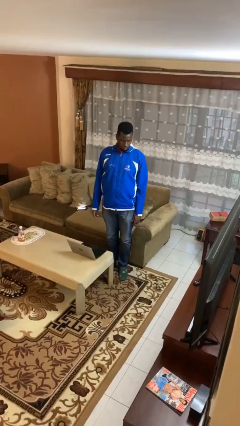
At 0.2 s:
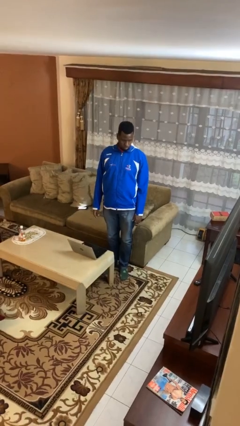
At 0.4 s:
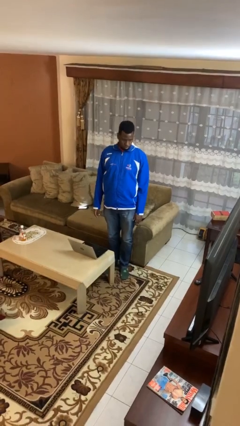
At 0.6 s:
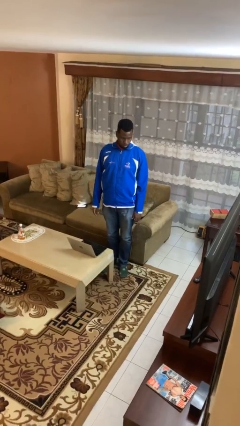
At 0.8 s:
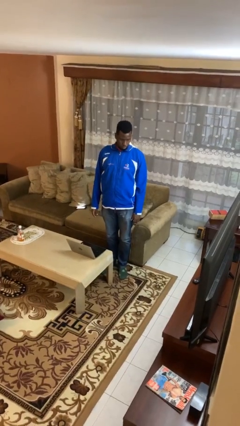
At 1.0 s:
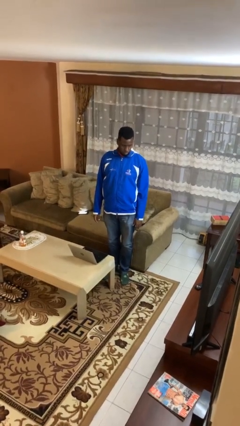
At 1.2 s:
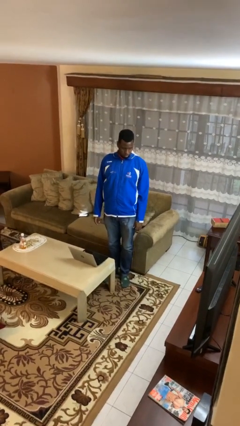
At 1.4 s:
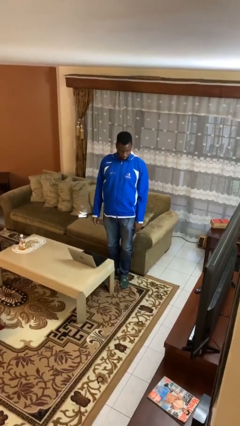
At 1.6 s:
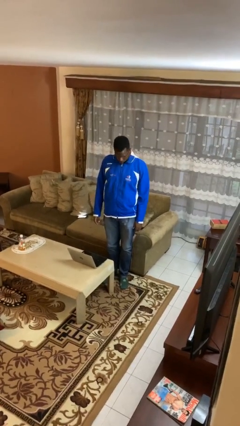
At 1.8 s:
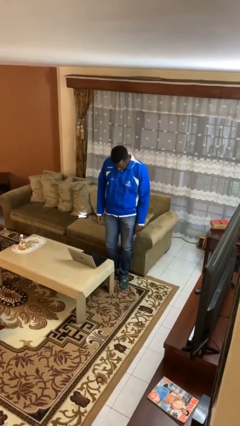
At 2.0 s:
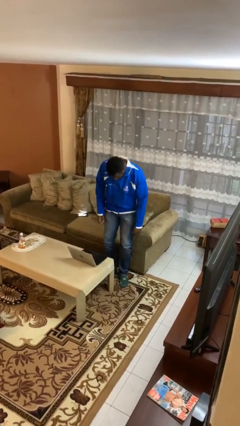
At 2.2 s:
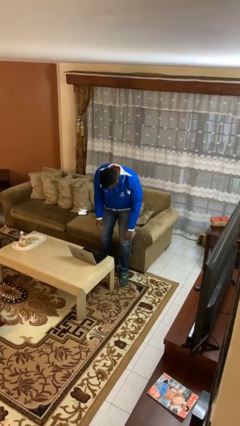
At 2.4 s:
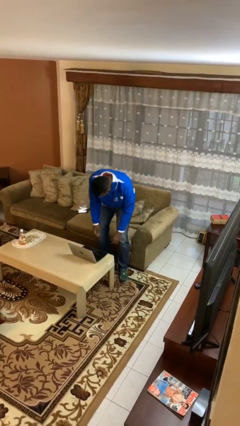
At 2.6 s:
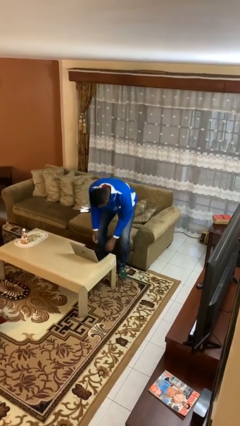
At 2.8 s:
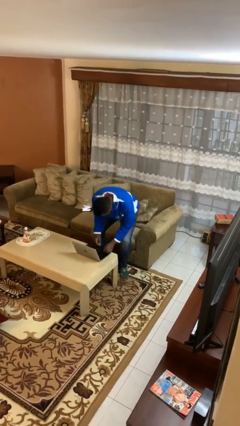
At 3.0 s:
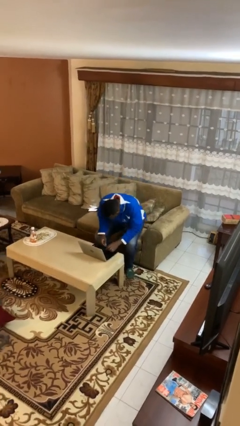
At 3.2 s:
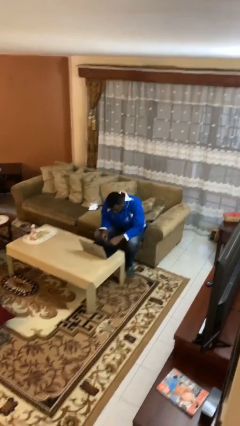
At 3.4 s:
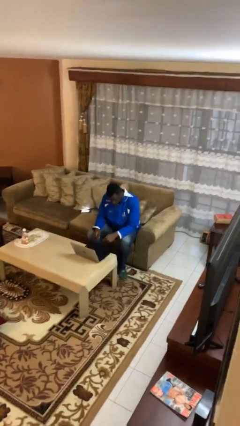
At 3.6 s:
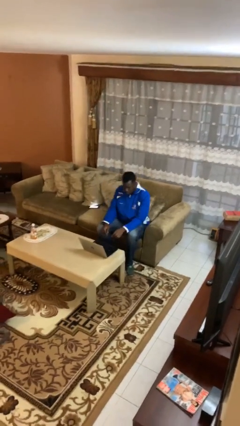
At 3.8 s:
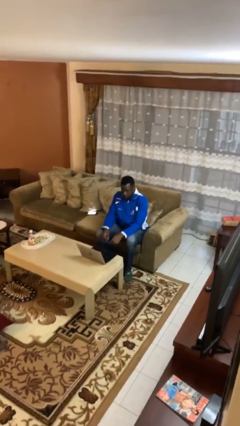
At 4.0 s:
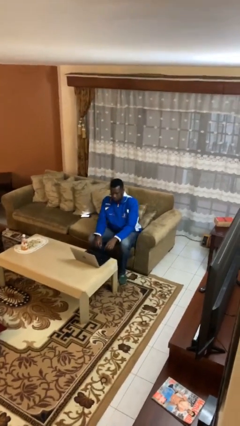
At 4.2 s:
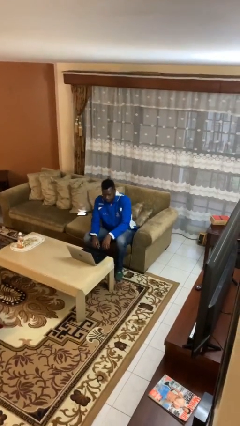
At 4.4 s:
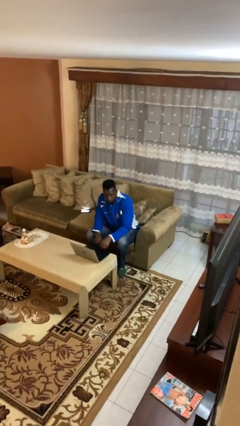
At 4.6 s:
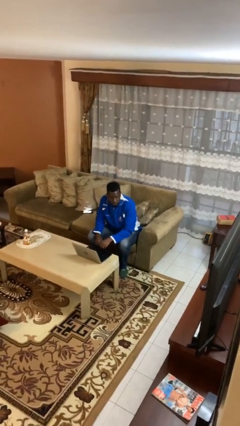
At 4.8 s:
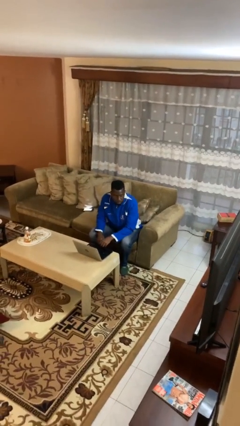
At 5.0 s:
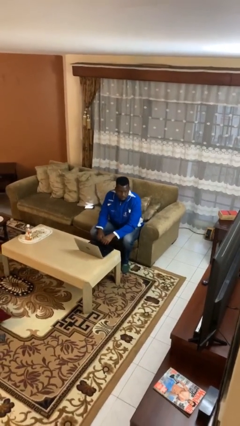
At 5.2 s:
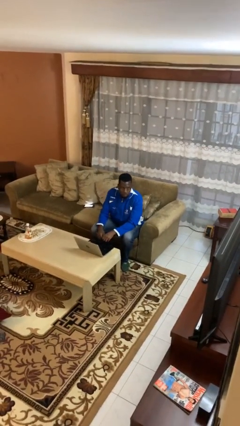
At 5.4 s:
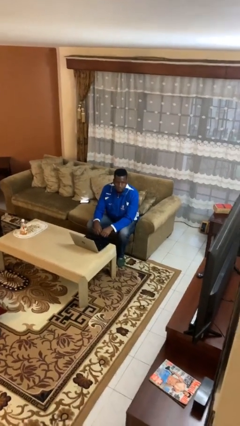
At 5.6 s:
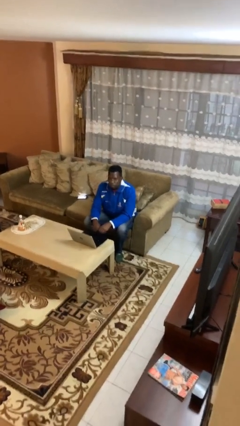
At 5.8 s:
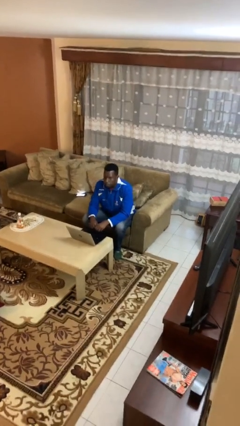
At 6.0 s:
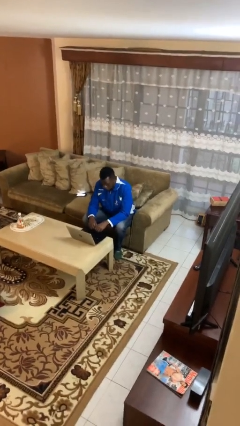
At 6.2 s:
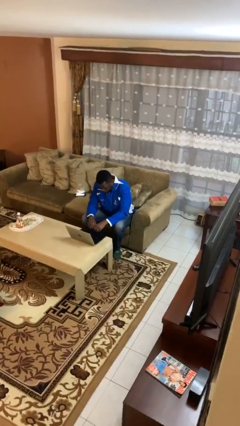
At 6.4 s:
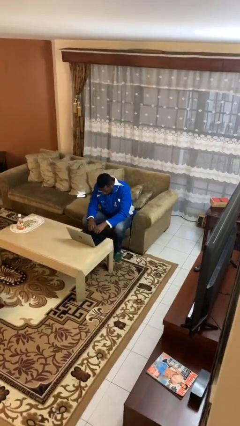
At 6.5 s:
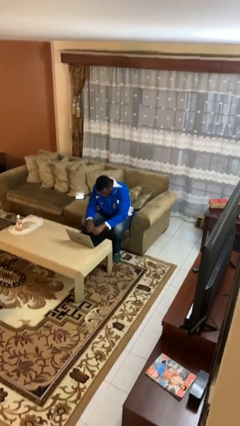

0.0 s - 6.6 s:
person sits down

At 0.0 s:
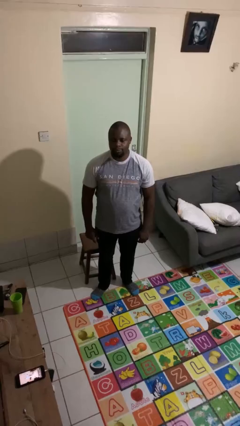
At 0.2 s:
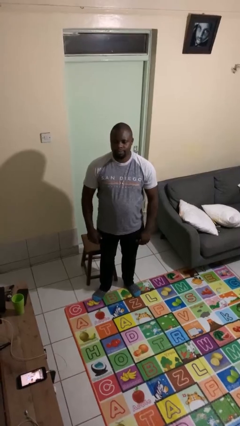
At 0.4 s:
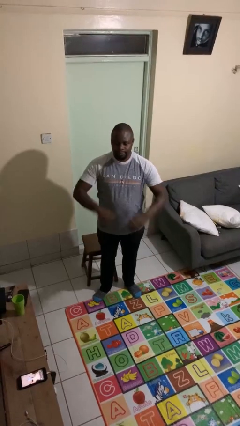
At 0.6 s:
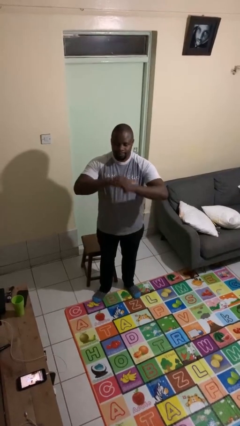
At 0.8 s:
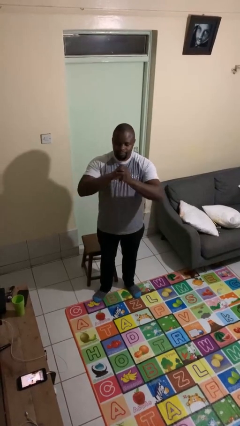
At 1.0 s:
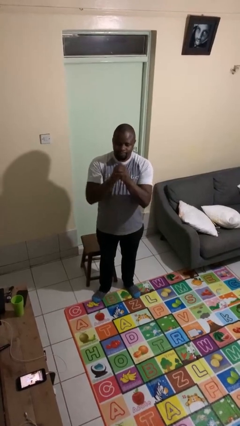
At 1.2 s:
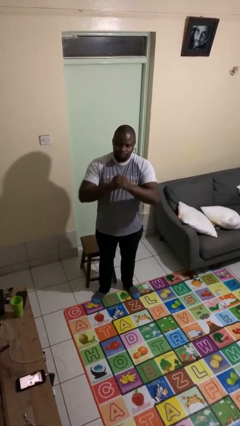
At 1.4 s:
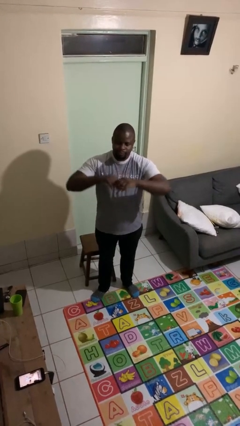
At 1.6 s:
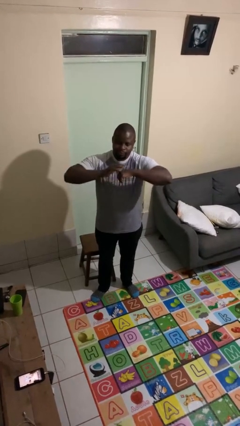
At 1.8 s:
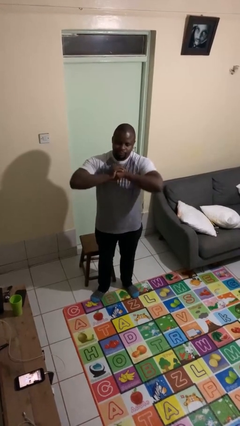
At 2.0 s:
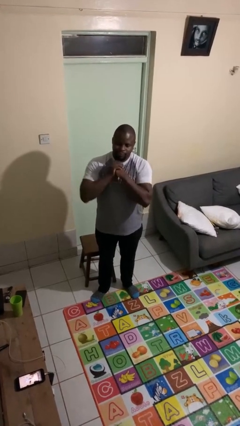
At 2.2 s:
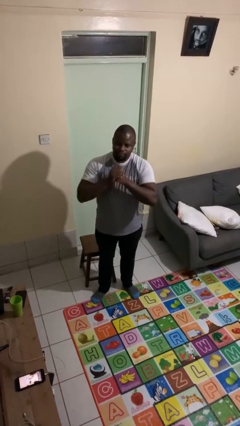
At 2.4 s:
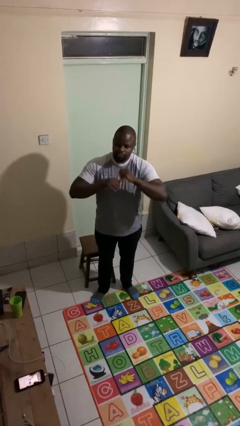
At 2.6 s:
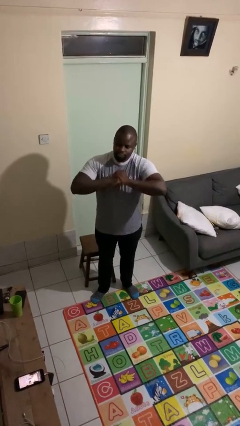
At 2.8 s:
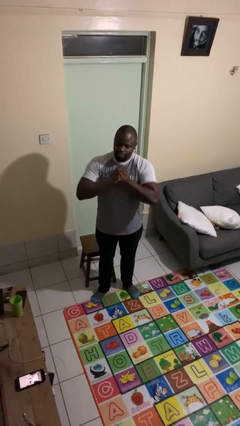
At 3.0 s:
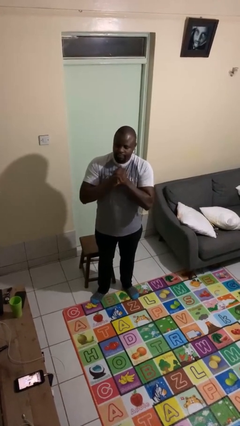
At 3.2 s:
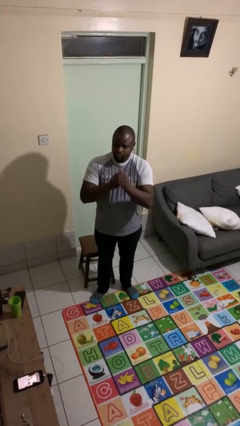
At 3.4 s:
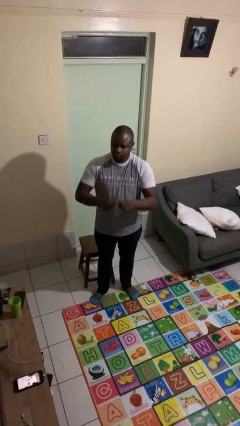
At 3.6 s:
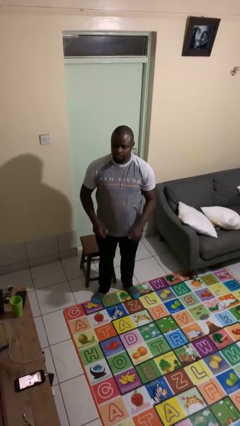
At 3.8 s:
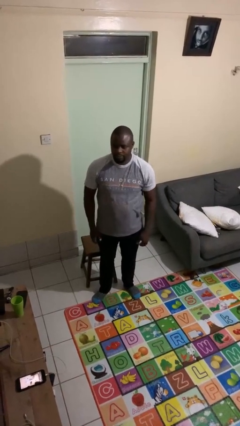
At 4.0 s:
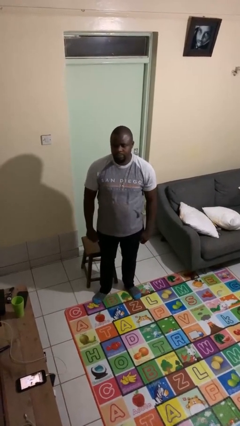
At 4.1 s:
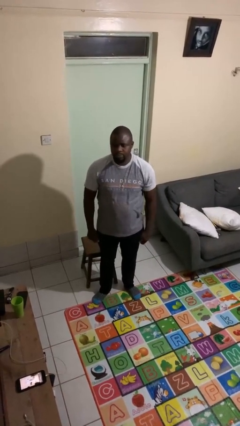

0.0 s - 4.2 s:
person cracks knuckles

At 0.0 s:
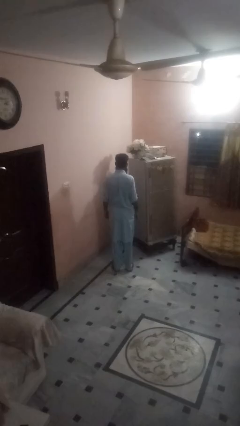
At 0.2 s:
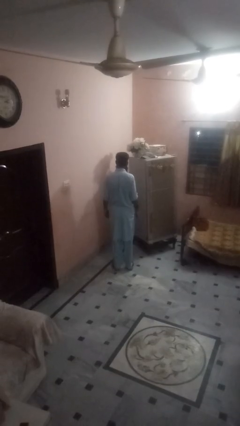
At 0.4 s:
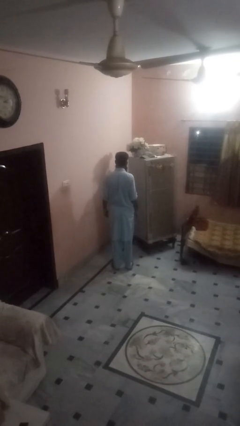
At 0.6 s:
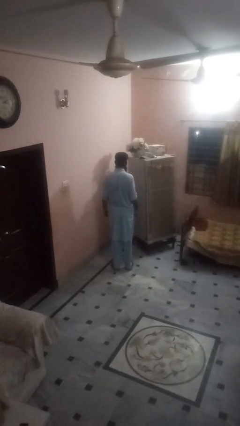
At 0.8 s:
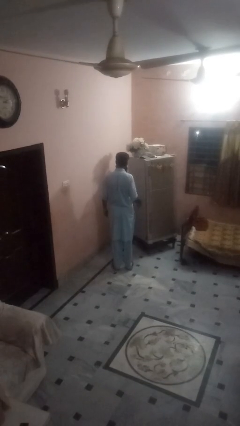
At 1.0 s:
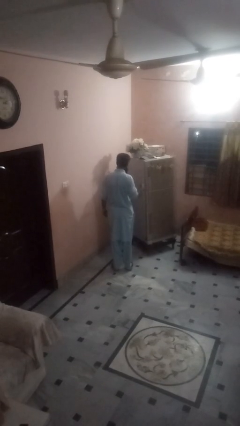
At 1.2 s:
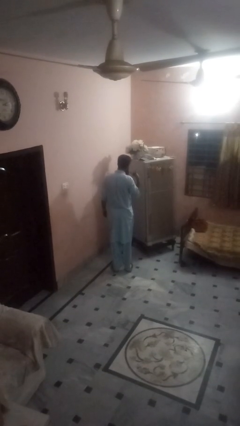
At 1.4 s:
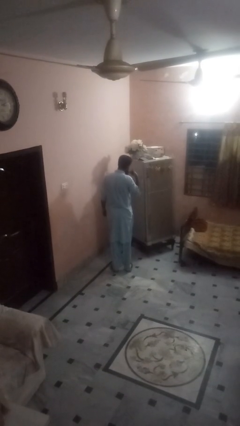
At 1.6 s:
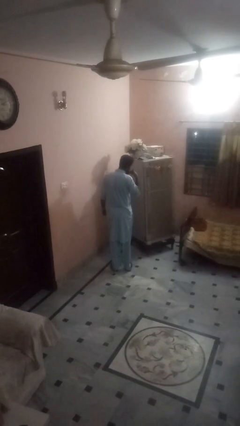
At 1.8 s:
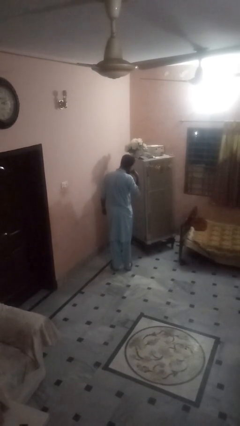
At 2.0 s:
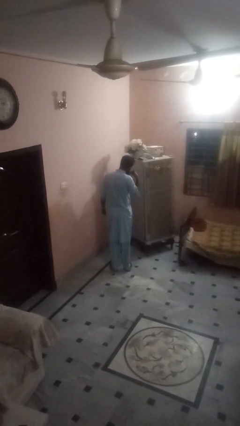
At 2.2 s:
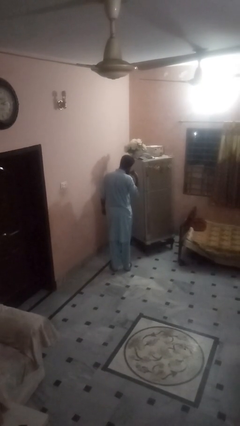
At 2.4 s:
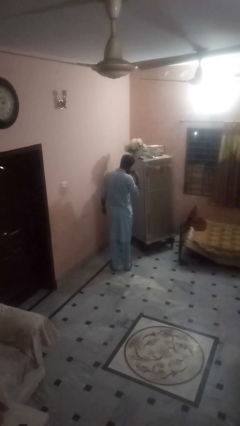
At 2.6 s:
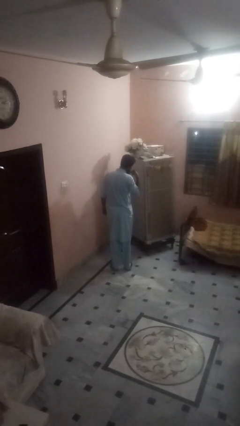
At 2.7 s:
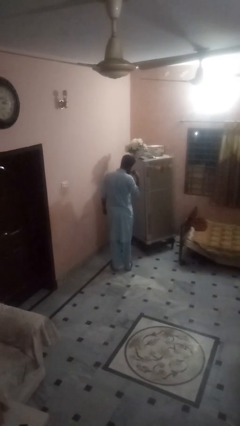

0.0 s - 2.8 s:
person gestures call me

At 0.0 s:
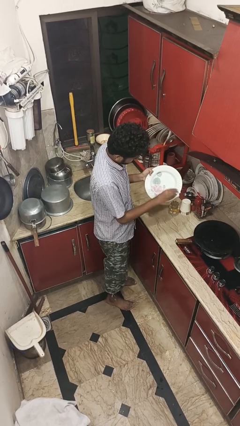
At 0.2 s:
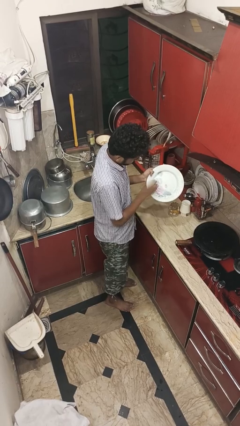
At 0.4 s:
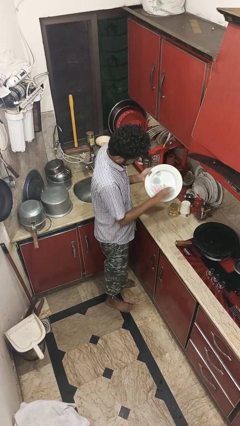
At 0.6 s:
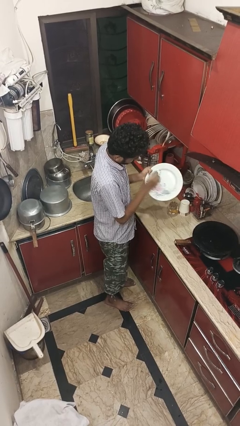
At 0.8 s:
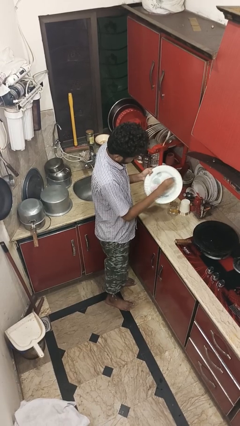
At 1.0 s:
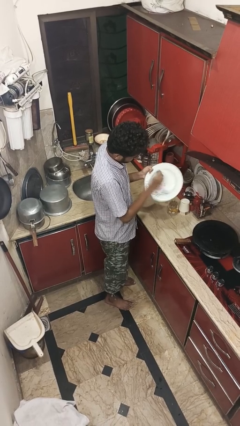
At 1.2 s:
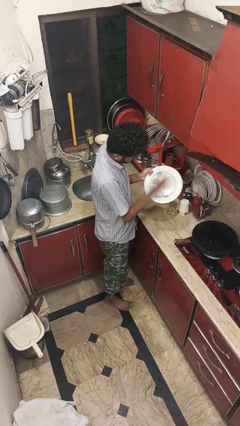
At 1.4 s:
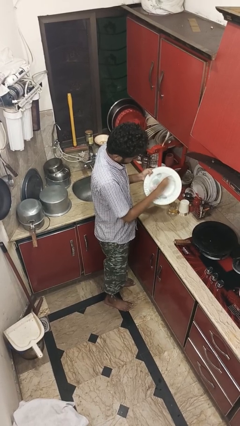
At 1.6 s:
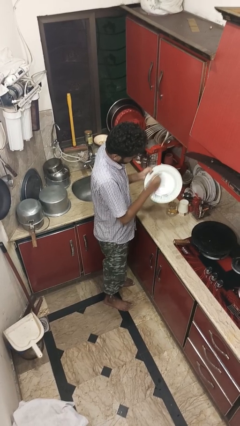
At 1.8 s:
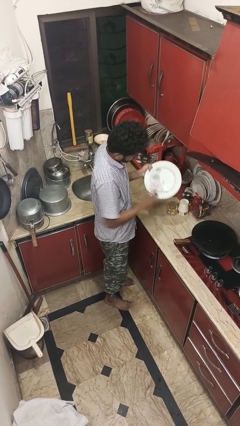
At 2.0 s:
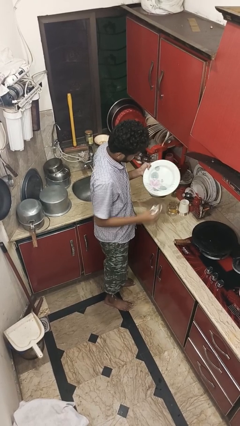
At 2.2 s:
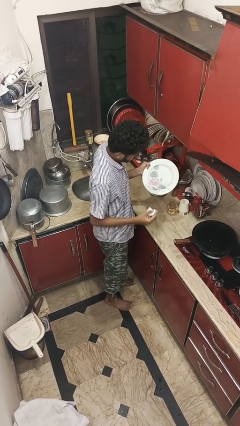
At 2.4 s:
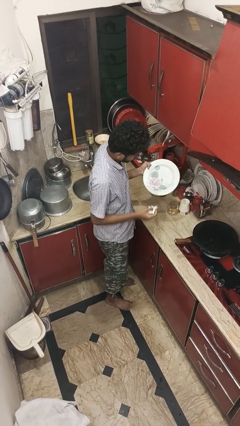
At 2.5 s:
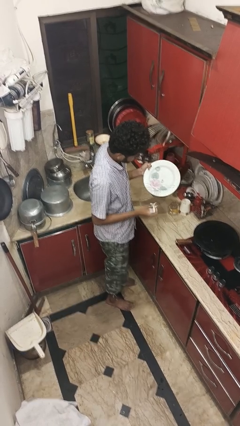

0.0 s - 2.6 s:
person dries dish

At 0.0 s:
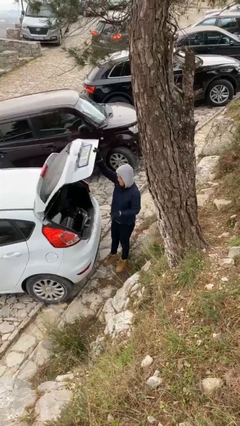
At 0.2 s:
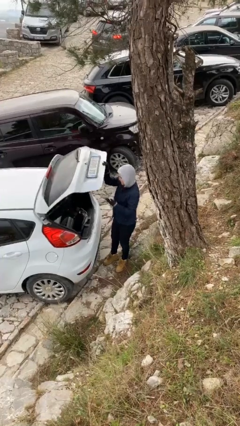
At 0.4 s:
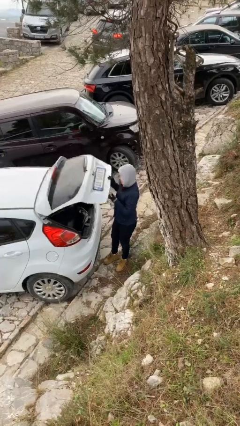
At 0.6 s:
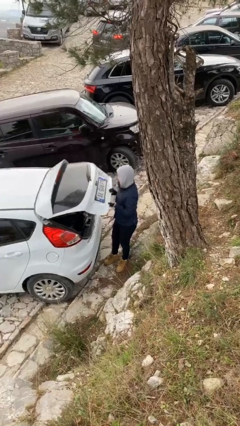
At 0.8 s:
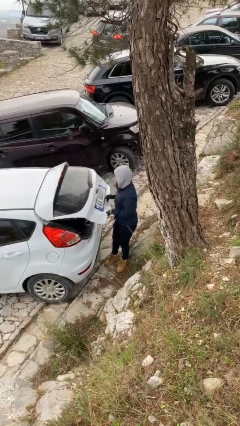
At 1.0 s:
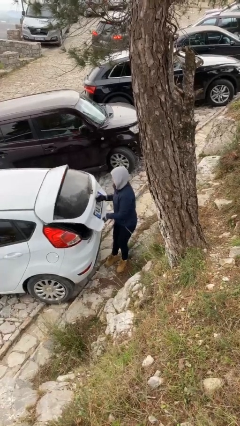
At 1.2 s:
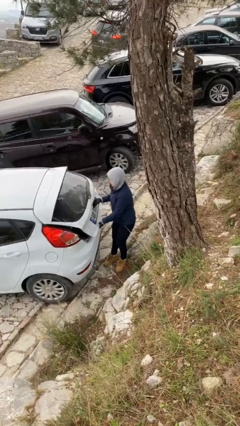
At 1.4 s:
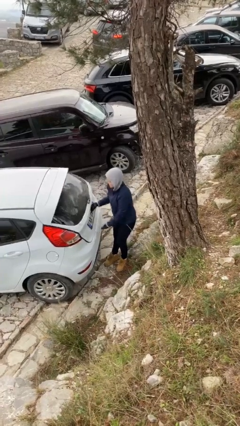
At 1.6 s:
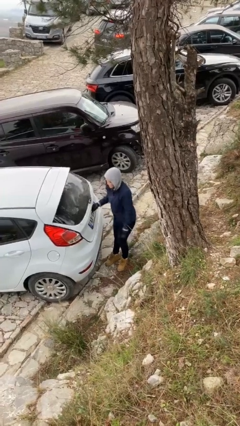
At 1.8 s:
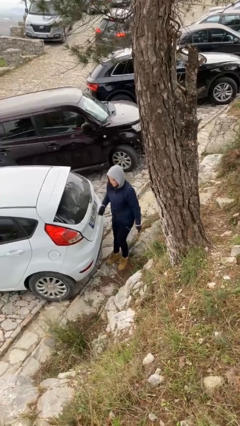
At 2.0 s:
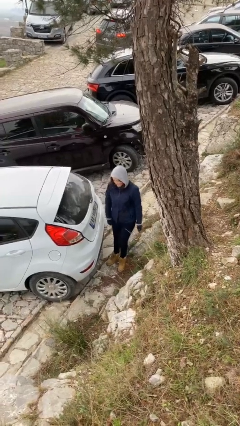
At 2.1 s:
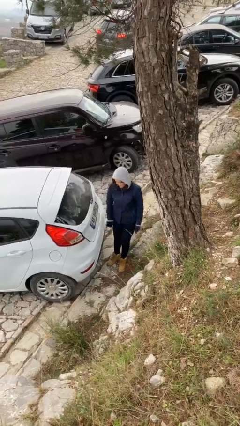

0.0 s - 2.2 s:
person closes car trunk
